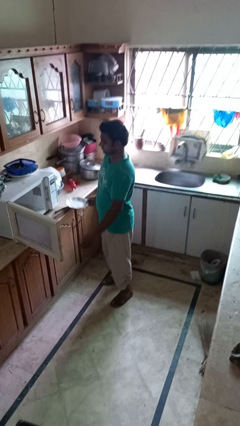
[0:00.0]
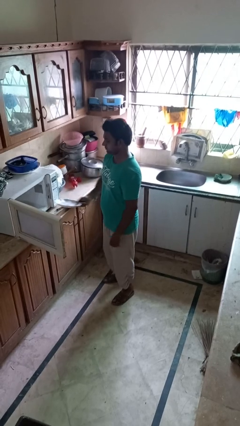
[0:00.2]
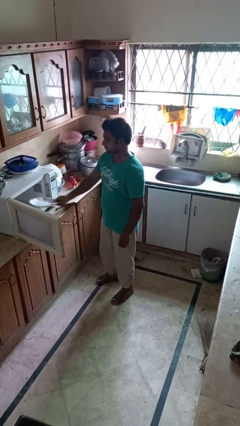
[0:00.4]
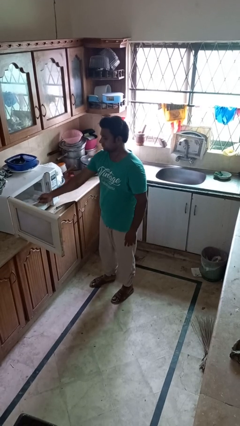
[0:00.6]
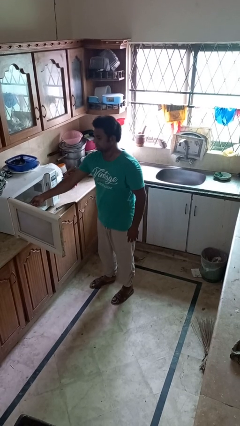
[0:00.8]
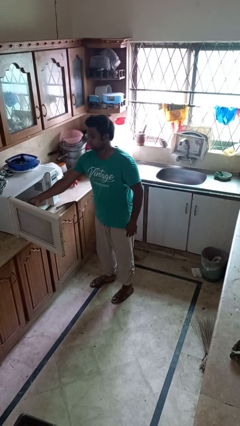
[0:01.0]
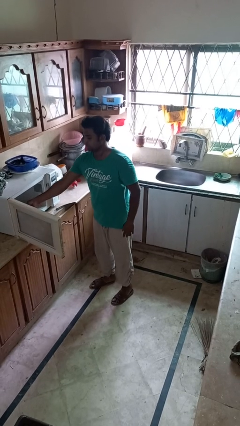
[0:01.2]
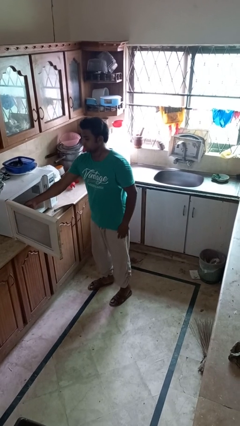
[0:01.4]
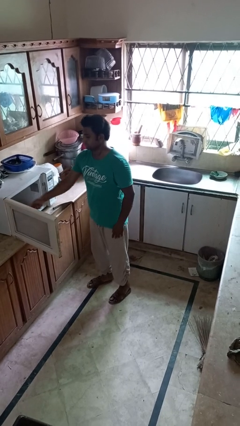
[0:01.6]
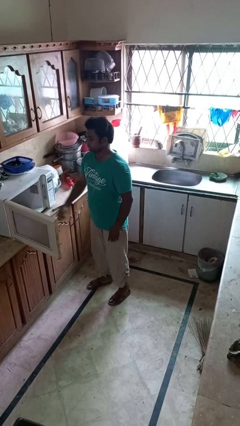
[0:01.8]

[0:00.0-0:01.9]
person puts object into microwave

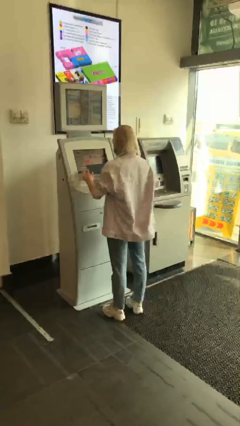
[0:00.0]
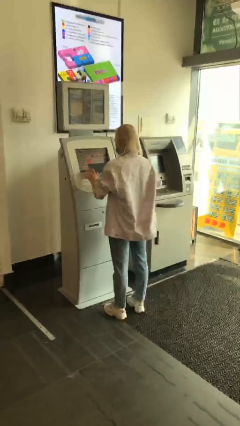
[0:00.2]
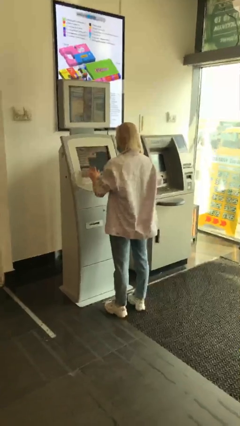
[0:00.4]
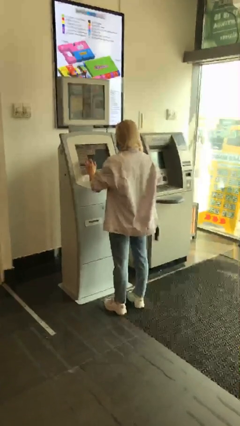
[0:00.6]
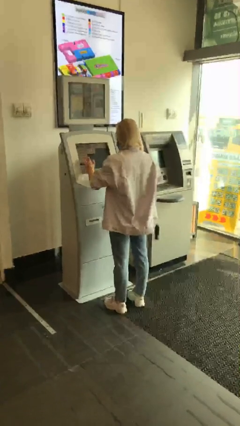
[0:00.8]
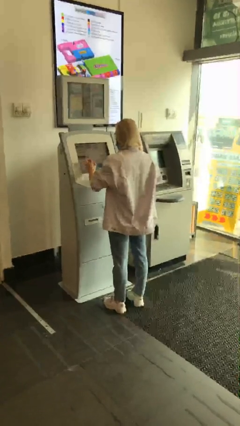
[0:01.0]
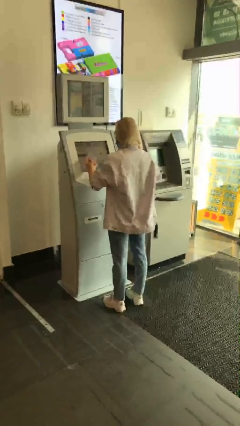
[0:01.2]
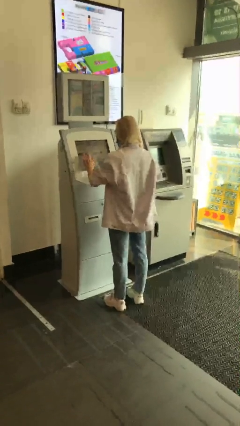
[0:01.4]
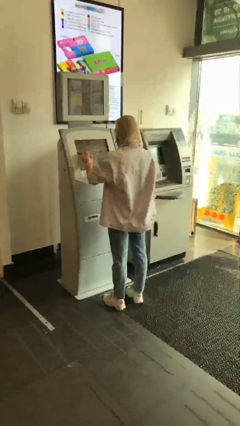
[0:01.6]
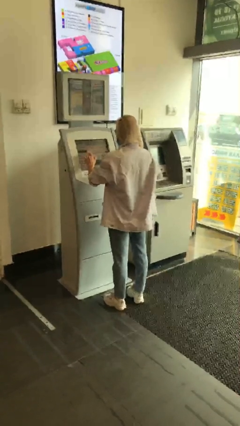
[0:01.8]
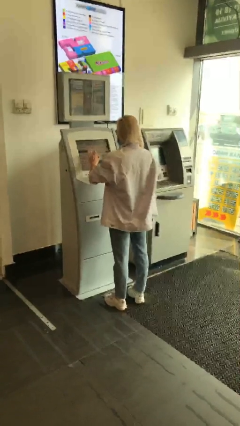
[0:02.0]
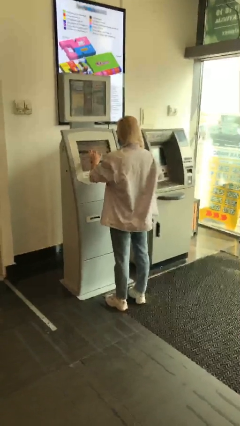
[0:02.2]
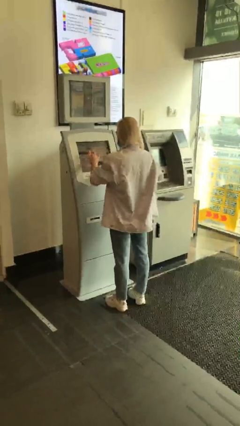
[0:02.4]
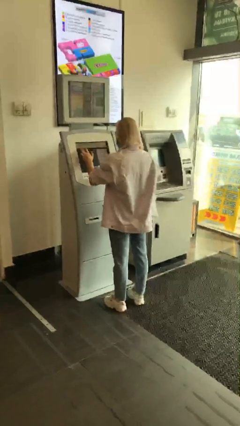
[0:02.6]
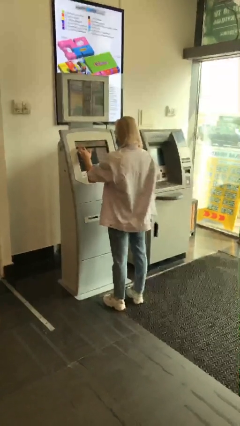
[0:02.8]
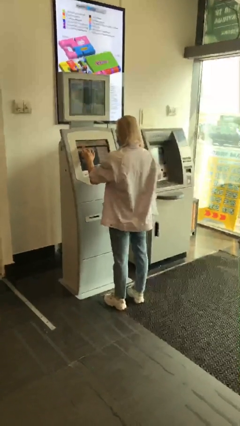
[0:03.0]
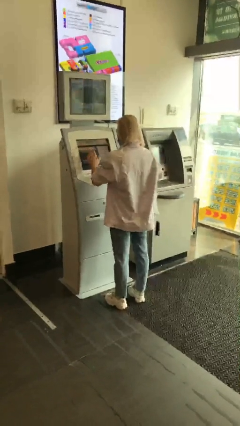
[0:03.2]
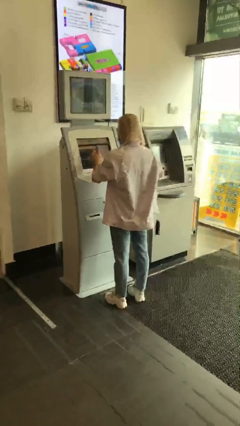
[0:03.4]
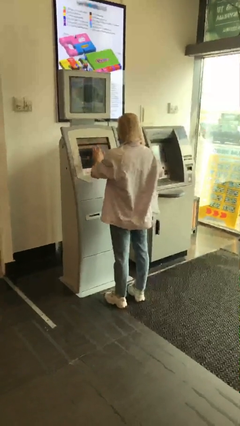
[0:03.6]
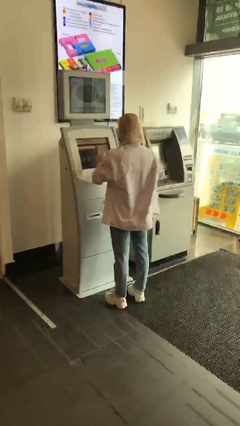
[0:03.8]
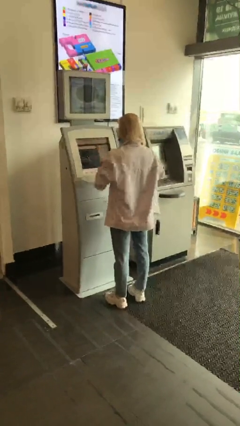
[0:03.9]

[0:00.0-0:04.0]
person purchases from machine

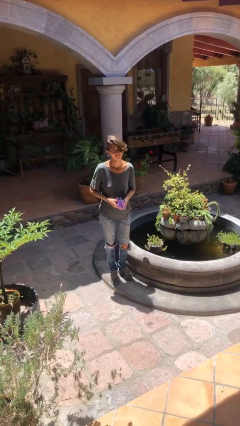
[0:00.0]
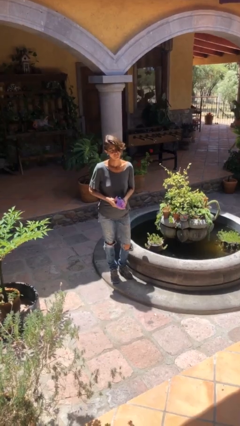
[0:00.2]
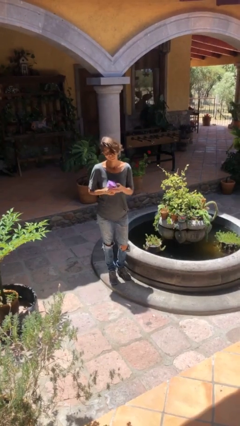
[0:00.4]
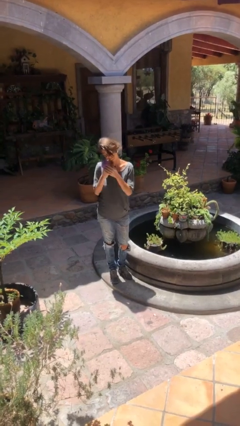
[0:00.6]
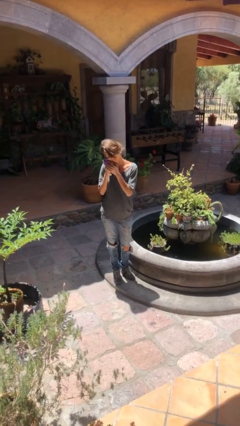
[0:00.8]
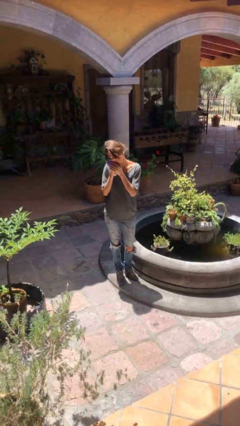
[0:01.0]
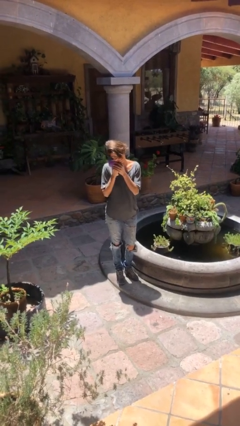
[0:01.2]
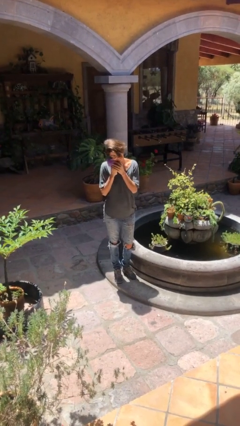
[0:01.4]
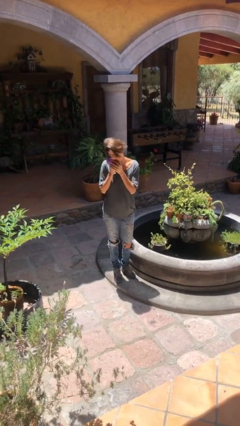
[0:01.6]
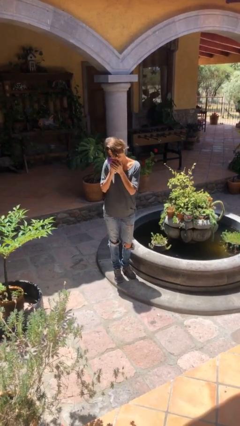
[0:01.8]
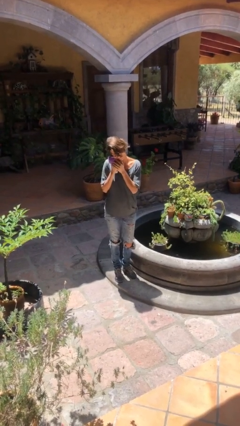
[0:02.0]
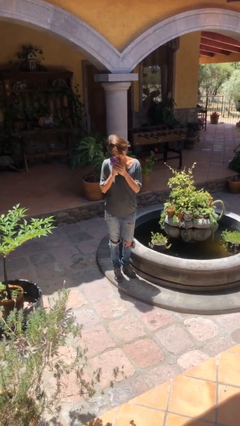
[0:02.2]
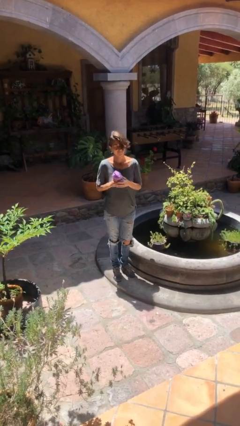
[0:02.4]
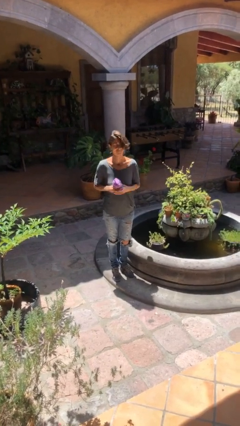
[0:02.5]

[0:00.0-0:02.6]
person hugs stuffed animal

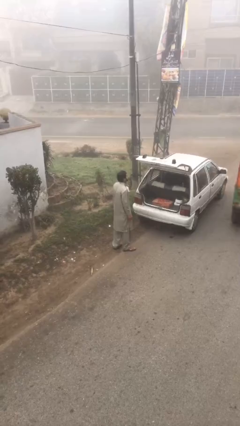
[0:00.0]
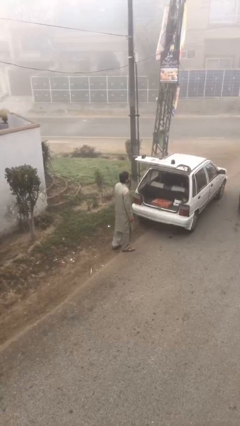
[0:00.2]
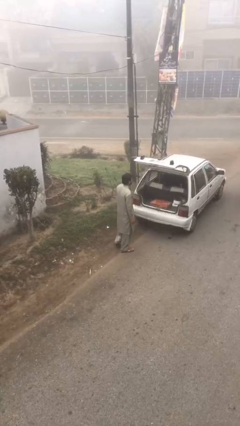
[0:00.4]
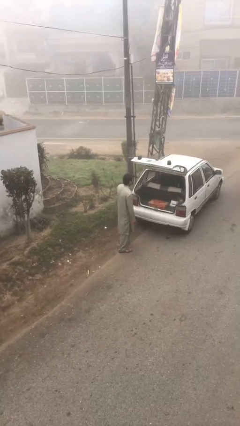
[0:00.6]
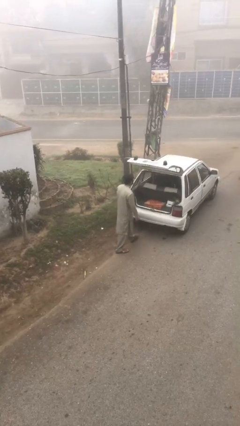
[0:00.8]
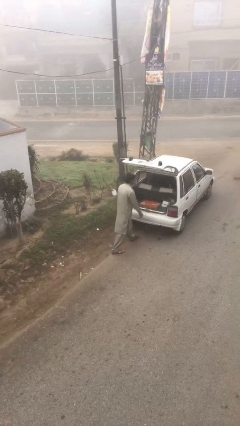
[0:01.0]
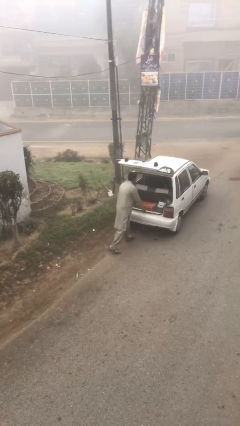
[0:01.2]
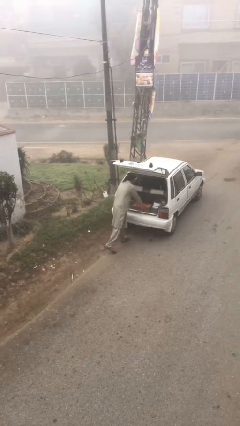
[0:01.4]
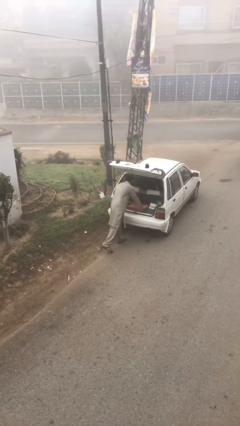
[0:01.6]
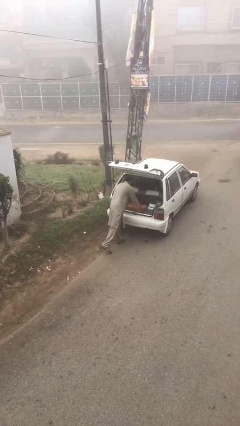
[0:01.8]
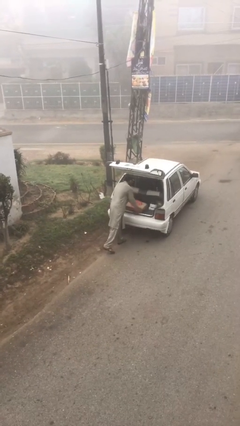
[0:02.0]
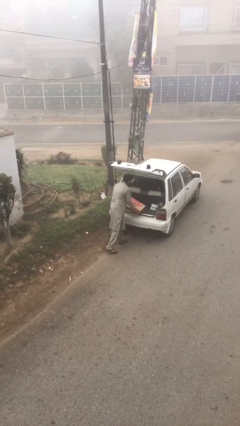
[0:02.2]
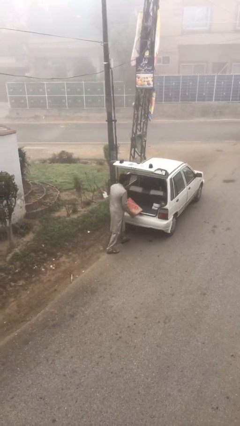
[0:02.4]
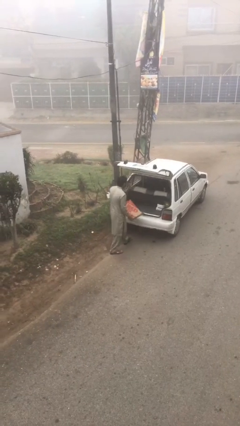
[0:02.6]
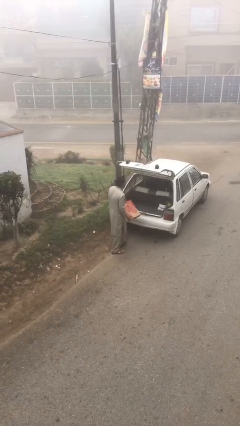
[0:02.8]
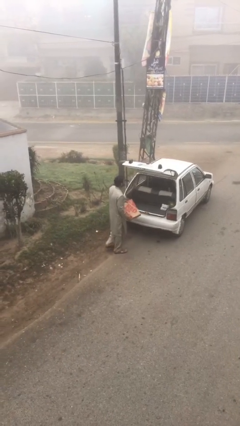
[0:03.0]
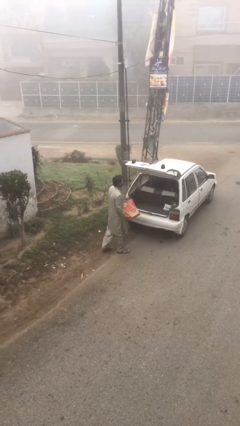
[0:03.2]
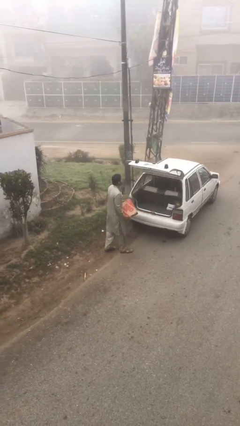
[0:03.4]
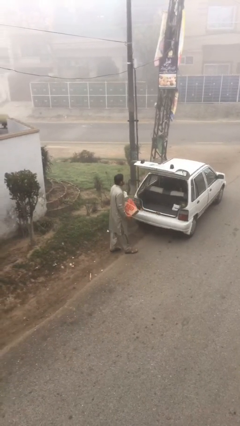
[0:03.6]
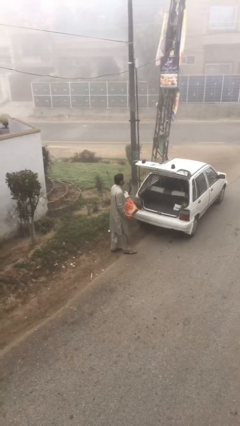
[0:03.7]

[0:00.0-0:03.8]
person unloads car

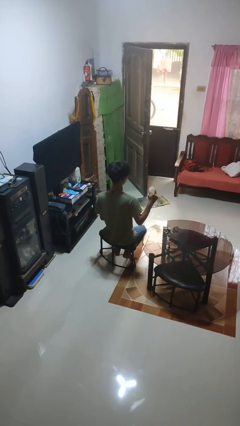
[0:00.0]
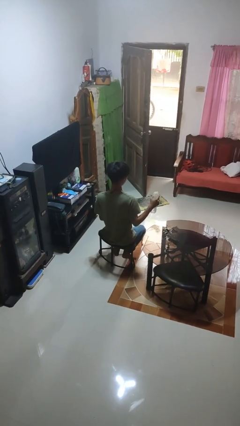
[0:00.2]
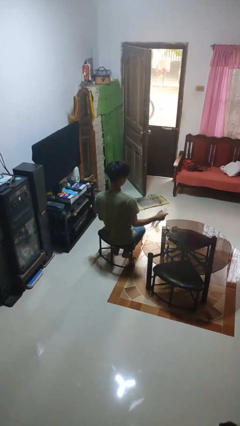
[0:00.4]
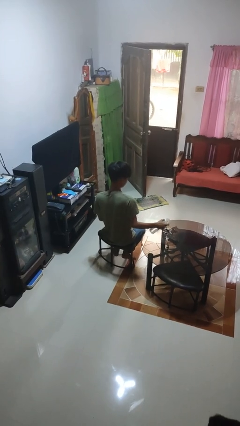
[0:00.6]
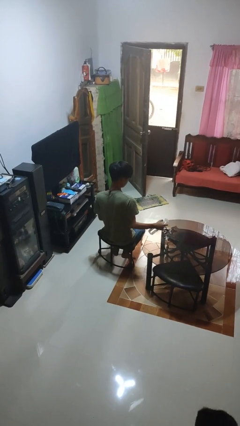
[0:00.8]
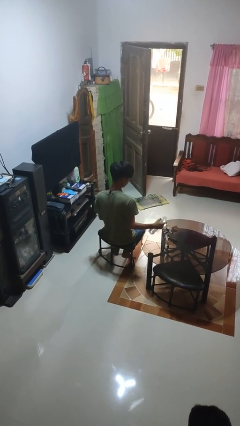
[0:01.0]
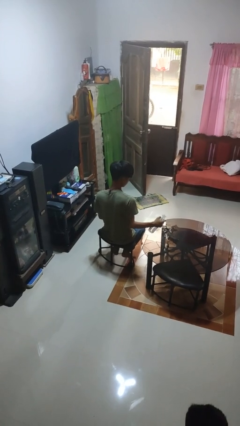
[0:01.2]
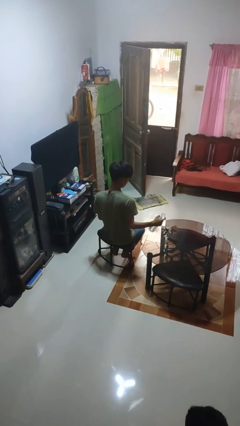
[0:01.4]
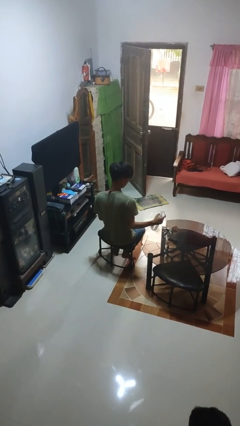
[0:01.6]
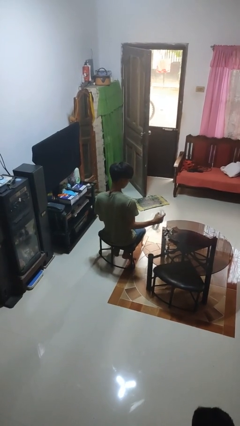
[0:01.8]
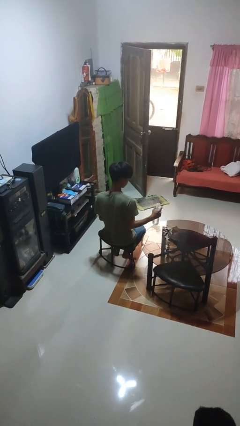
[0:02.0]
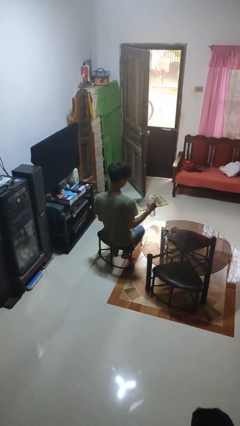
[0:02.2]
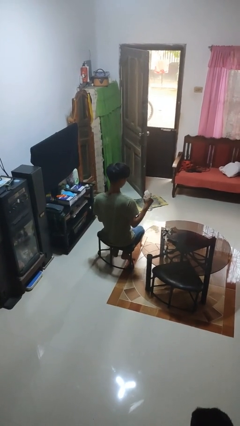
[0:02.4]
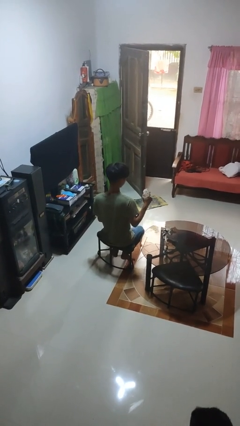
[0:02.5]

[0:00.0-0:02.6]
person sprays from bottle

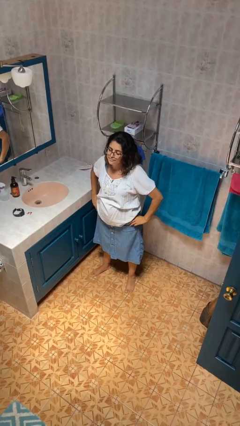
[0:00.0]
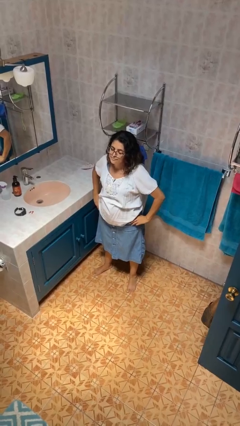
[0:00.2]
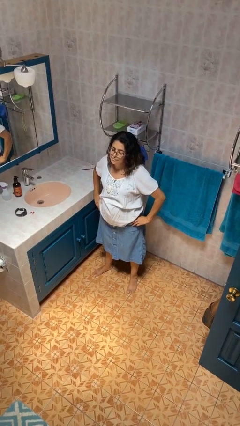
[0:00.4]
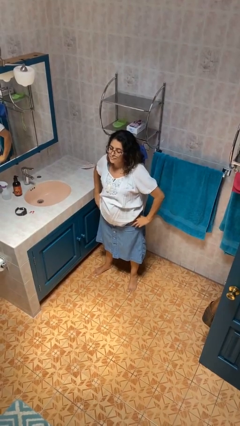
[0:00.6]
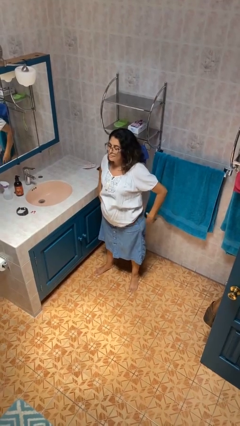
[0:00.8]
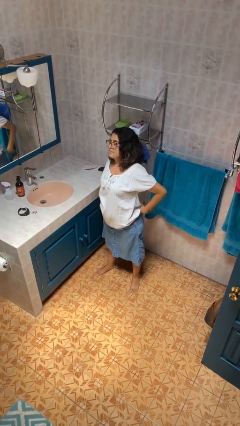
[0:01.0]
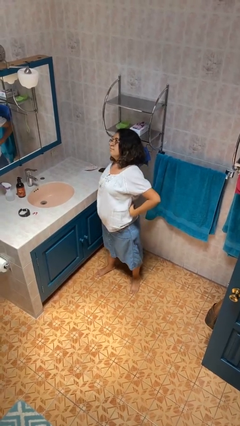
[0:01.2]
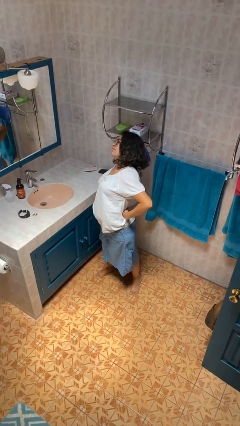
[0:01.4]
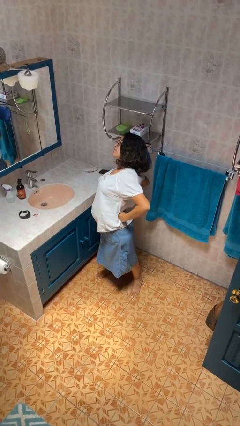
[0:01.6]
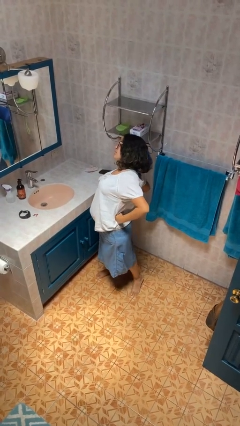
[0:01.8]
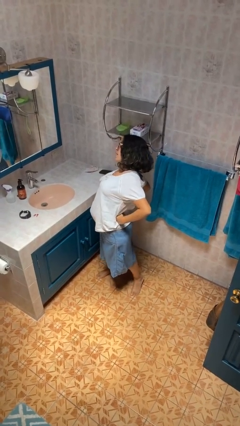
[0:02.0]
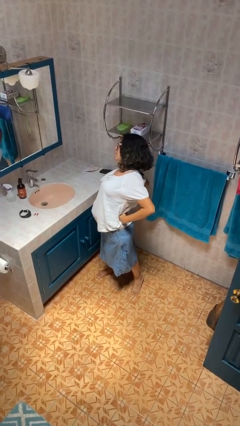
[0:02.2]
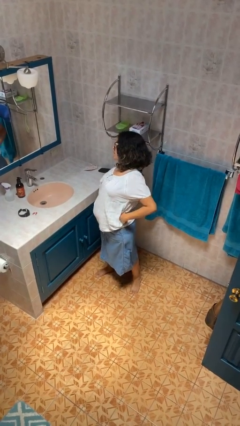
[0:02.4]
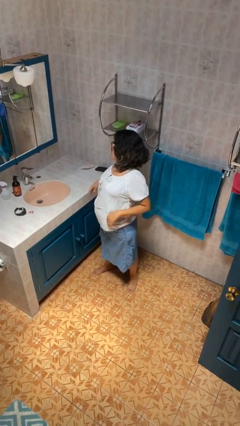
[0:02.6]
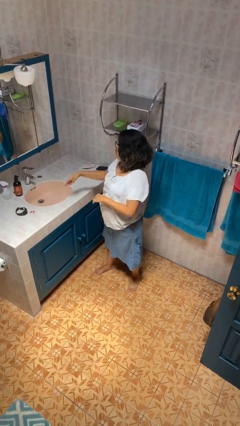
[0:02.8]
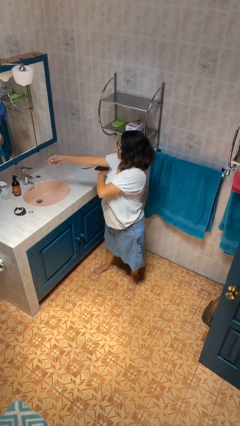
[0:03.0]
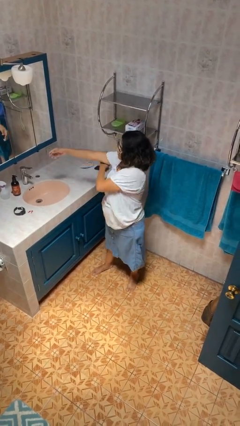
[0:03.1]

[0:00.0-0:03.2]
person stretches back
